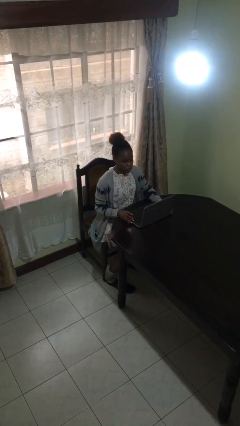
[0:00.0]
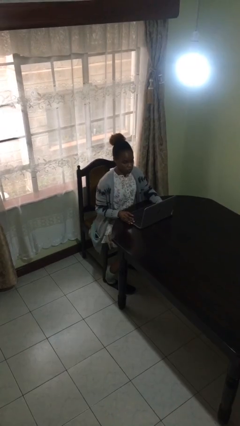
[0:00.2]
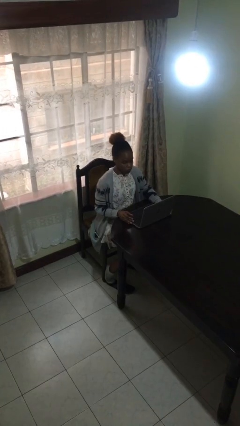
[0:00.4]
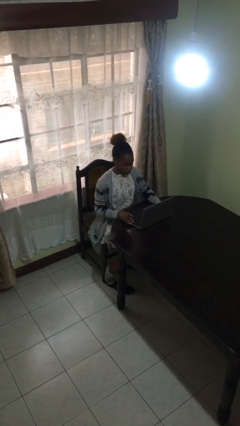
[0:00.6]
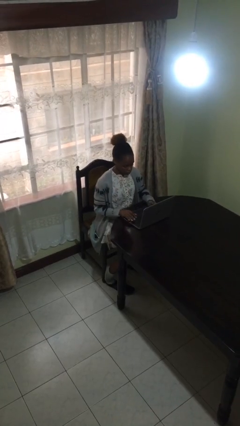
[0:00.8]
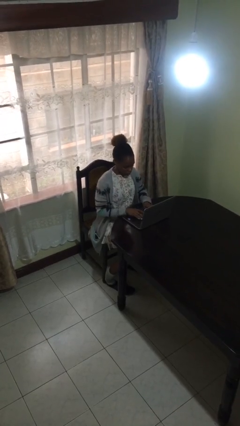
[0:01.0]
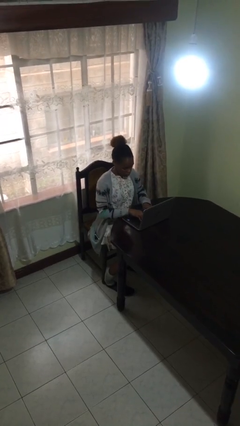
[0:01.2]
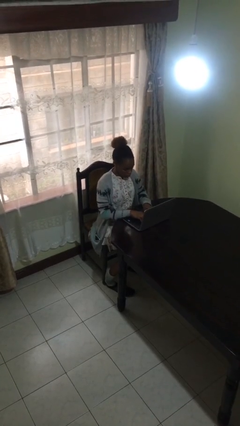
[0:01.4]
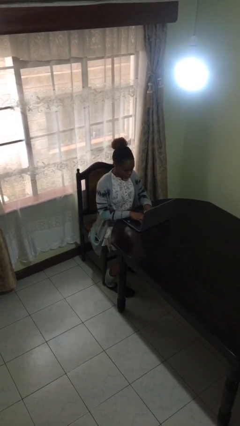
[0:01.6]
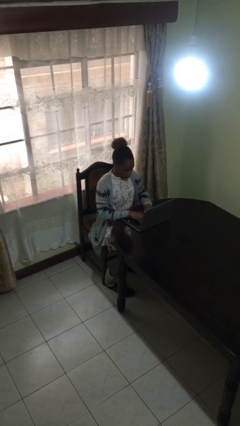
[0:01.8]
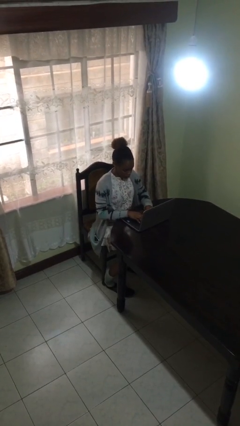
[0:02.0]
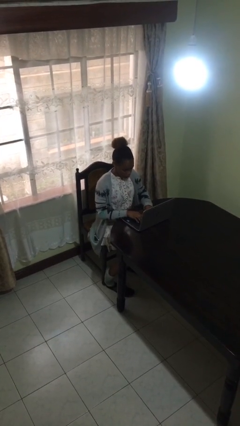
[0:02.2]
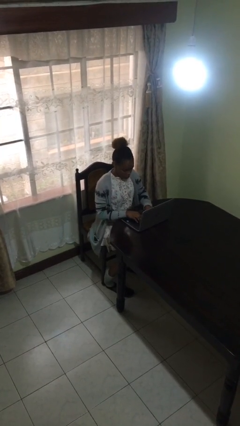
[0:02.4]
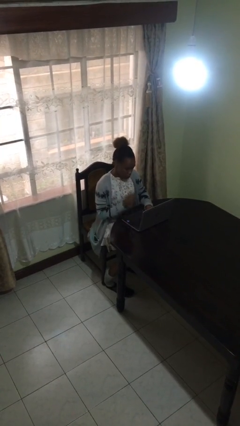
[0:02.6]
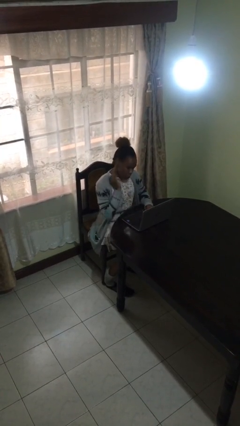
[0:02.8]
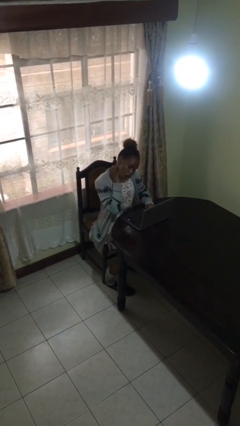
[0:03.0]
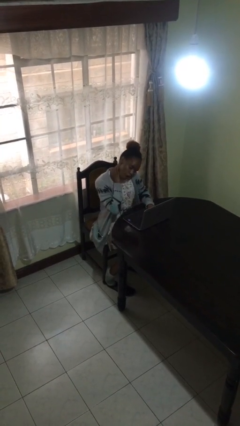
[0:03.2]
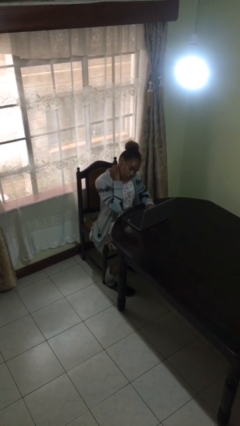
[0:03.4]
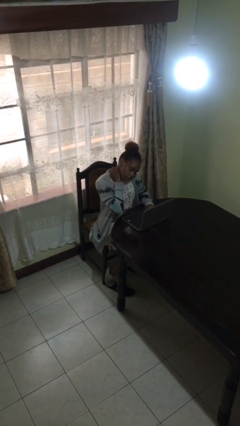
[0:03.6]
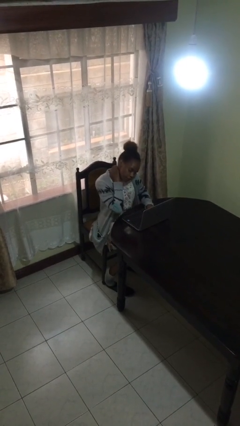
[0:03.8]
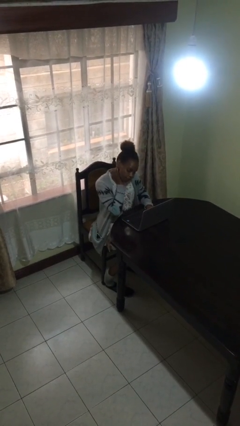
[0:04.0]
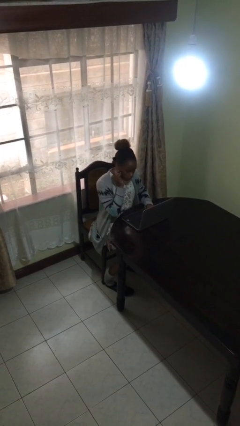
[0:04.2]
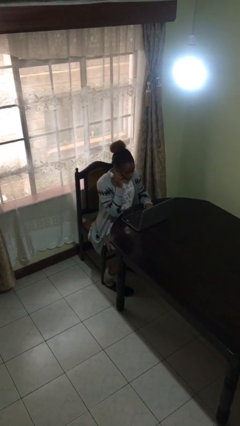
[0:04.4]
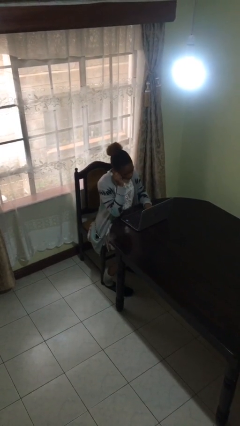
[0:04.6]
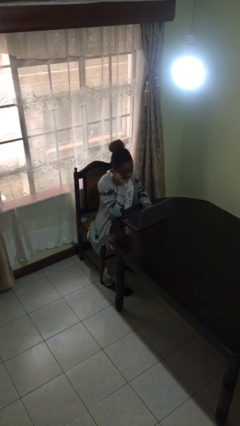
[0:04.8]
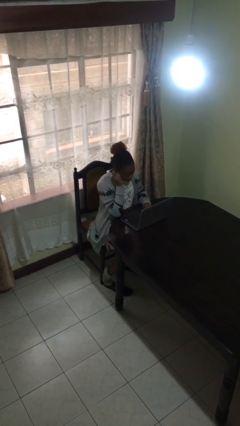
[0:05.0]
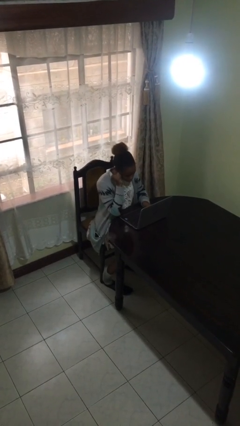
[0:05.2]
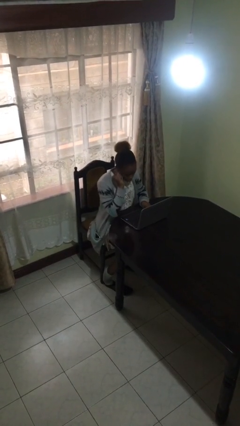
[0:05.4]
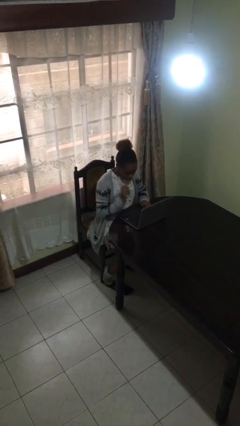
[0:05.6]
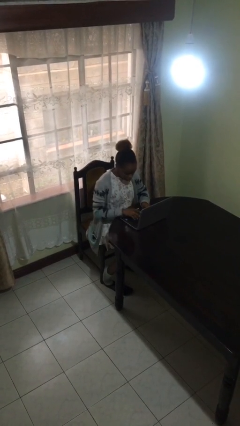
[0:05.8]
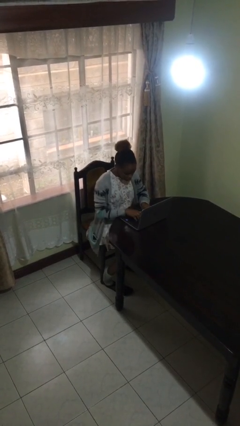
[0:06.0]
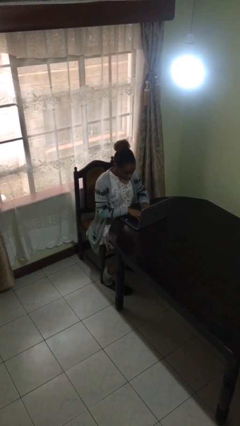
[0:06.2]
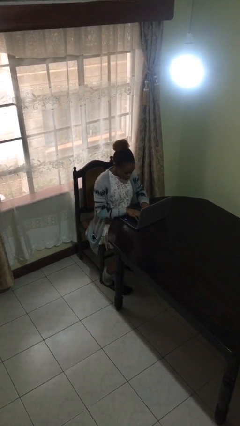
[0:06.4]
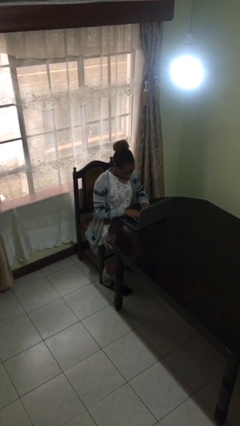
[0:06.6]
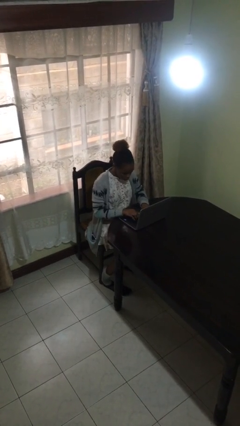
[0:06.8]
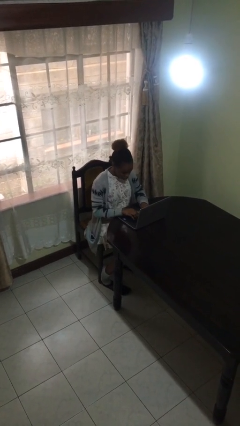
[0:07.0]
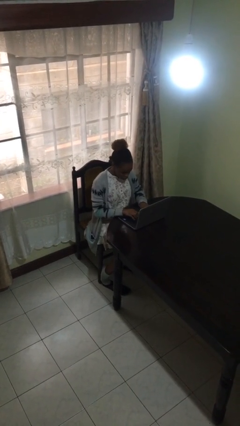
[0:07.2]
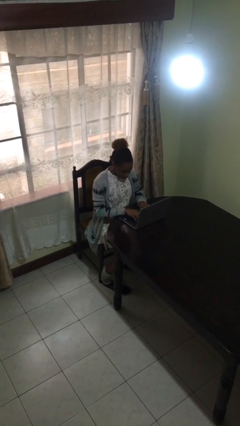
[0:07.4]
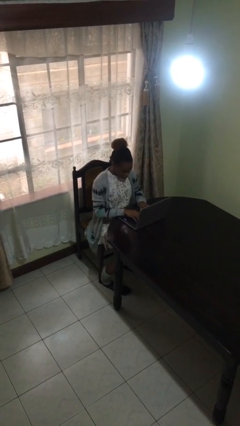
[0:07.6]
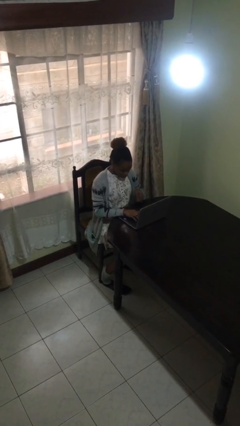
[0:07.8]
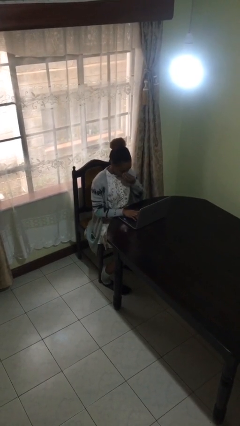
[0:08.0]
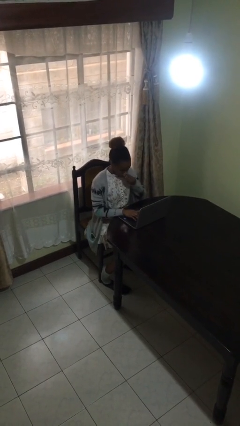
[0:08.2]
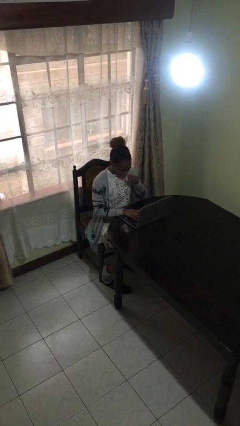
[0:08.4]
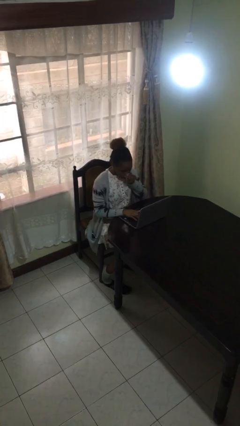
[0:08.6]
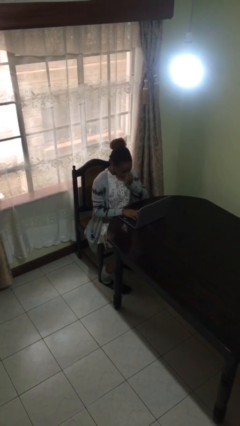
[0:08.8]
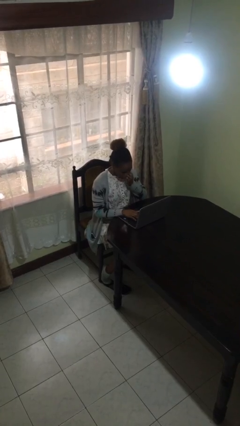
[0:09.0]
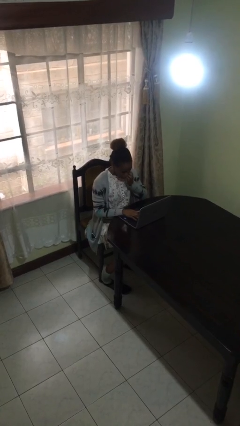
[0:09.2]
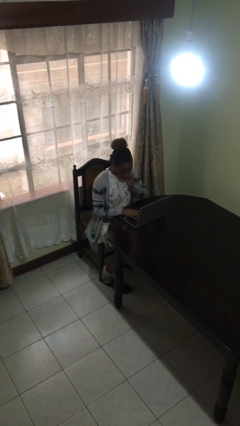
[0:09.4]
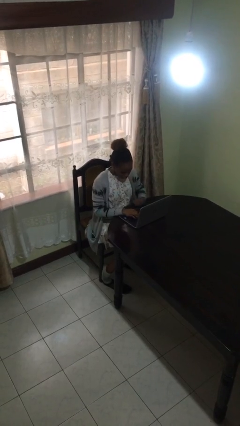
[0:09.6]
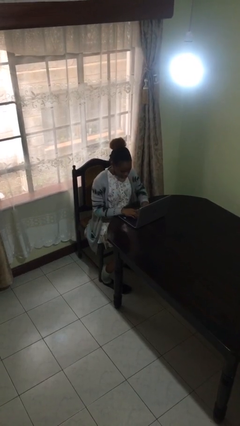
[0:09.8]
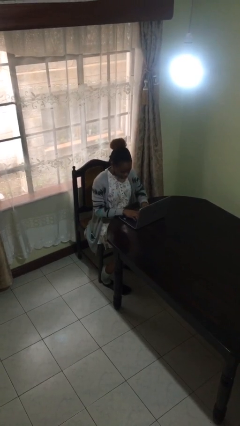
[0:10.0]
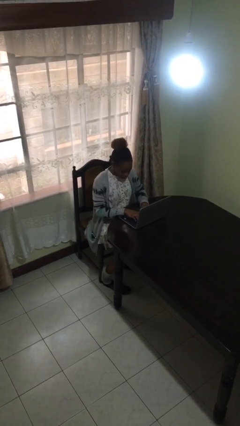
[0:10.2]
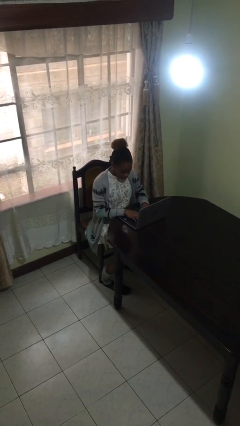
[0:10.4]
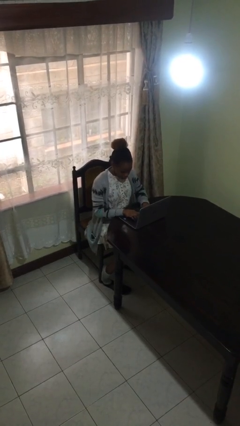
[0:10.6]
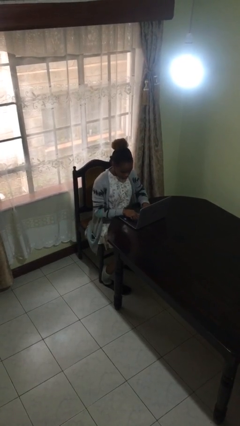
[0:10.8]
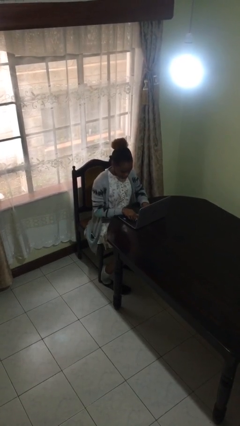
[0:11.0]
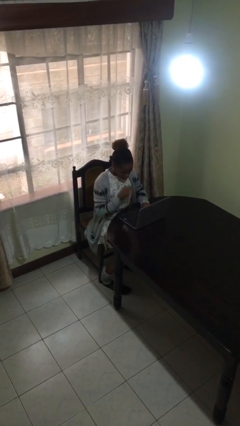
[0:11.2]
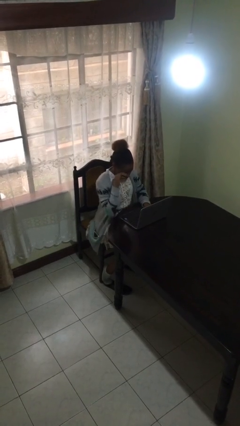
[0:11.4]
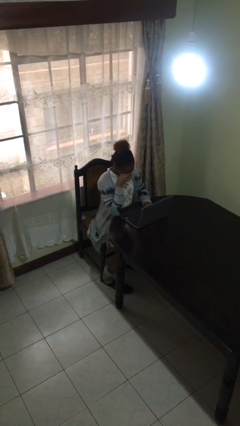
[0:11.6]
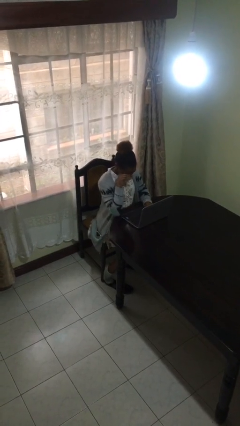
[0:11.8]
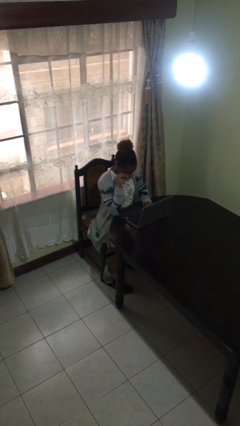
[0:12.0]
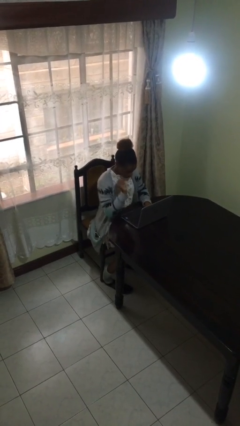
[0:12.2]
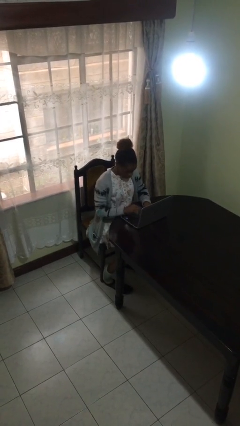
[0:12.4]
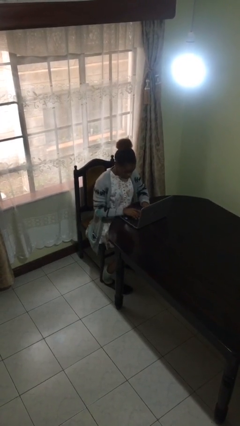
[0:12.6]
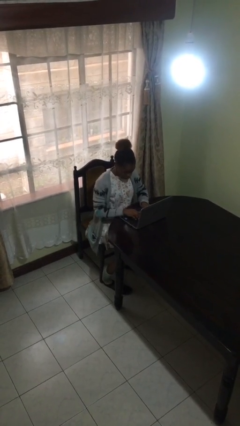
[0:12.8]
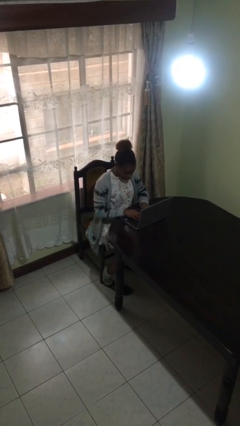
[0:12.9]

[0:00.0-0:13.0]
person interacts with laptop

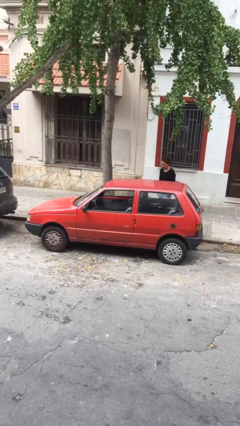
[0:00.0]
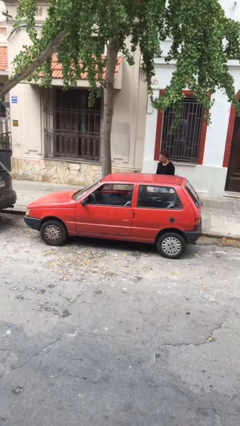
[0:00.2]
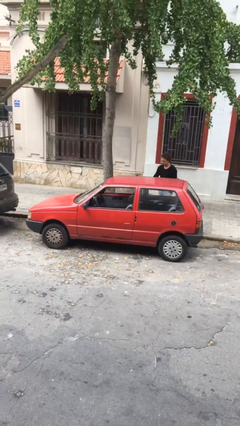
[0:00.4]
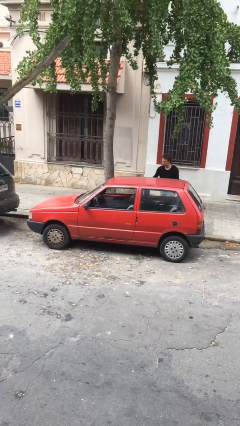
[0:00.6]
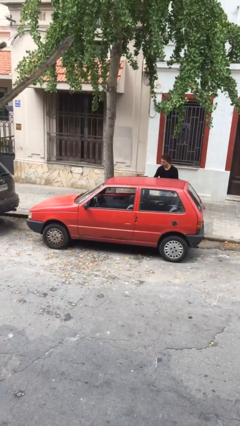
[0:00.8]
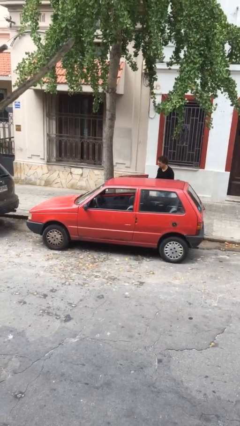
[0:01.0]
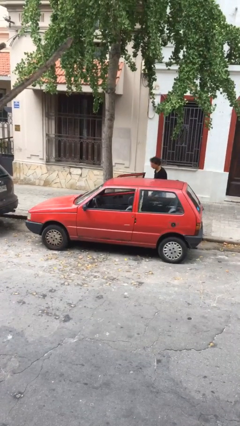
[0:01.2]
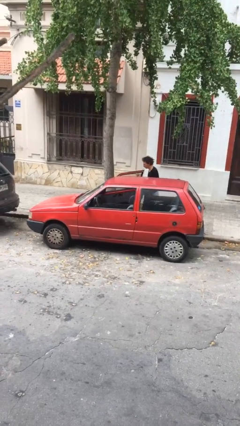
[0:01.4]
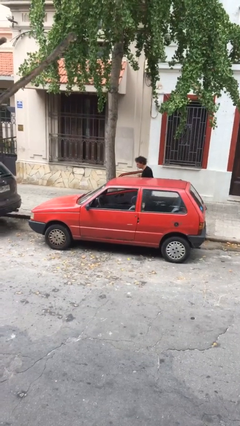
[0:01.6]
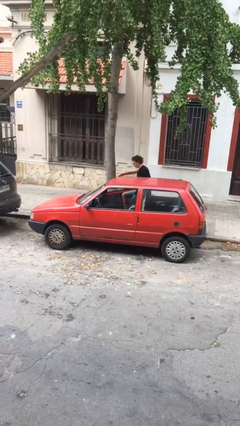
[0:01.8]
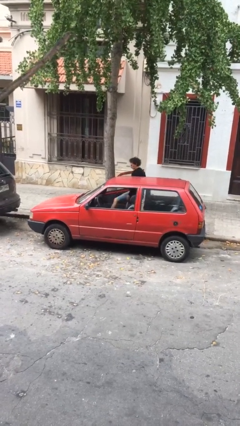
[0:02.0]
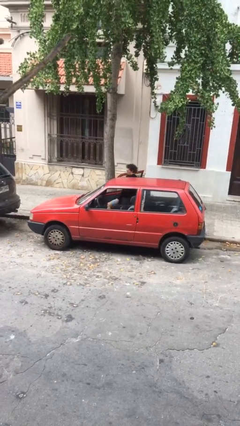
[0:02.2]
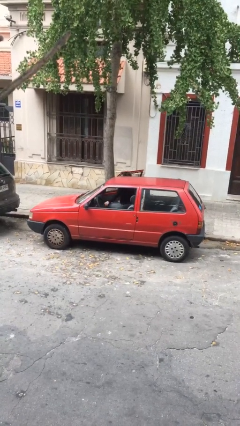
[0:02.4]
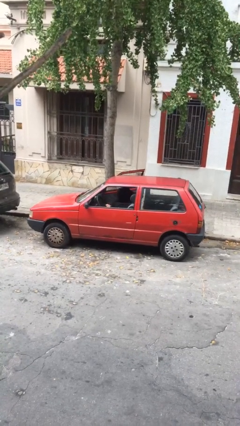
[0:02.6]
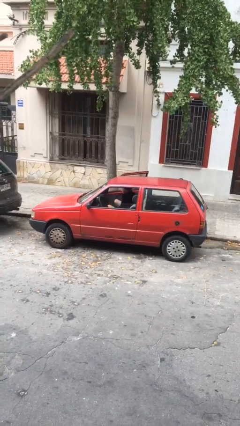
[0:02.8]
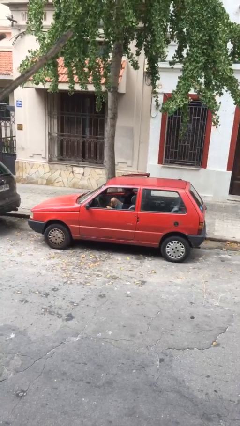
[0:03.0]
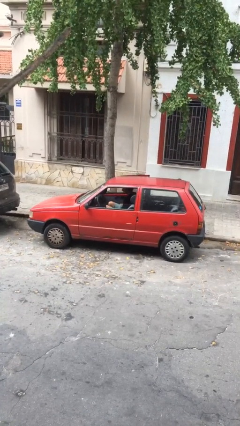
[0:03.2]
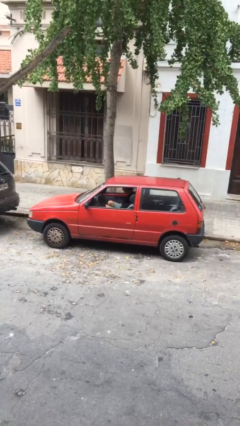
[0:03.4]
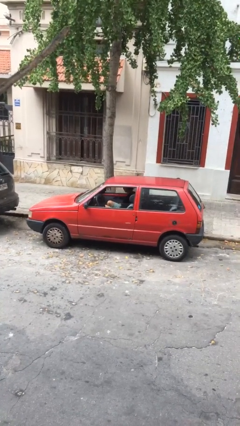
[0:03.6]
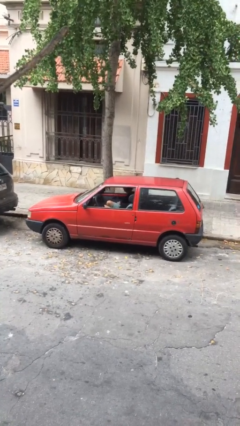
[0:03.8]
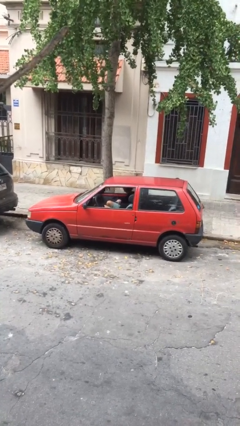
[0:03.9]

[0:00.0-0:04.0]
car picks up person

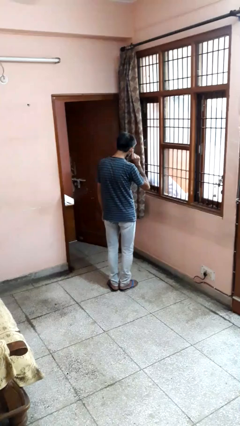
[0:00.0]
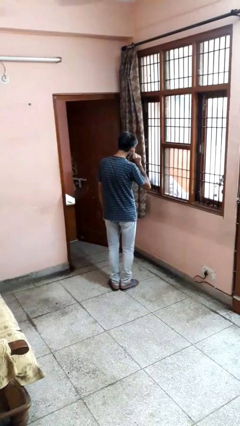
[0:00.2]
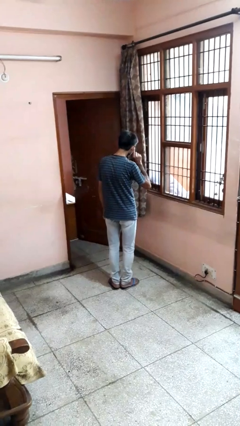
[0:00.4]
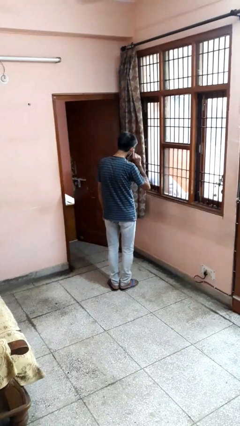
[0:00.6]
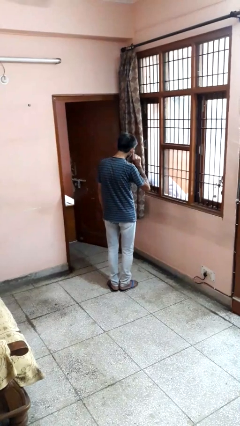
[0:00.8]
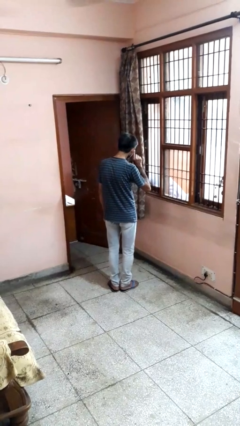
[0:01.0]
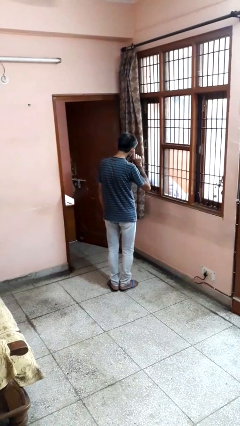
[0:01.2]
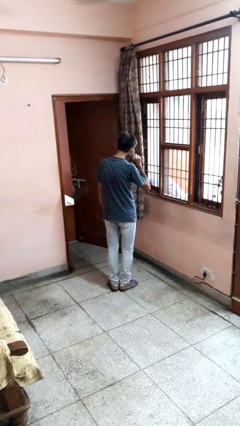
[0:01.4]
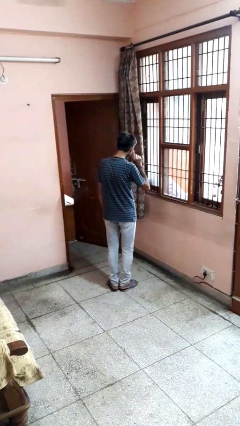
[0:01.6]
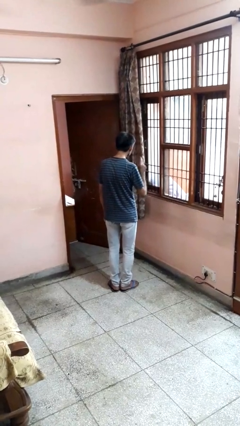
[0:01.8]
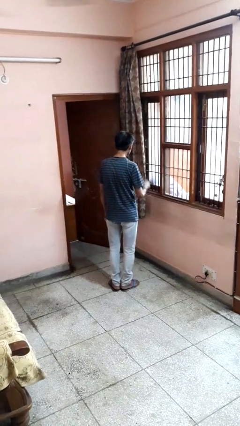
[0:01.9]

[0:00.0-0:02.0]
person gestures listen closely
